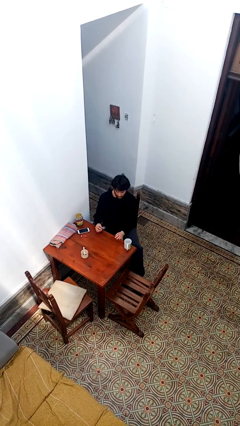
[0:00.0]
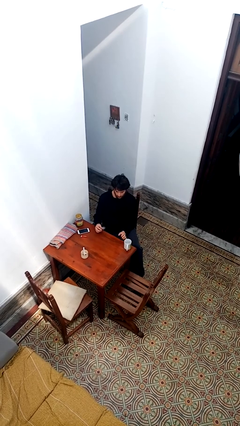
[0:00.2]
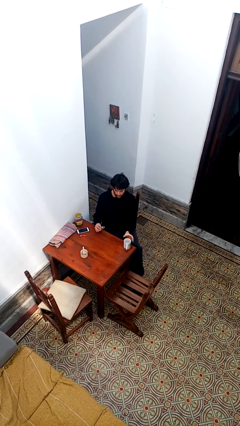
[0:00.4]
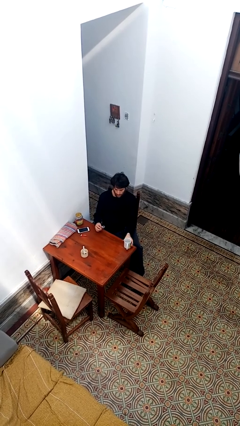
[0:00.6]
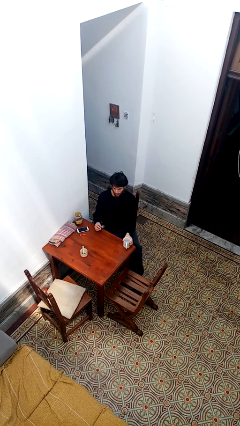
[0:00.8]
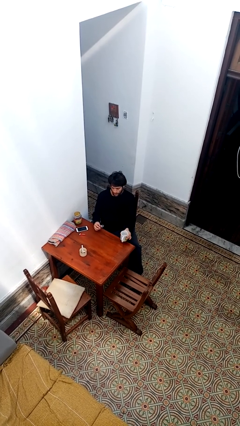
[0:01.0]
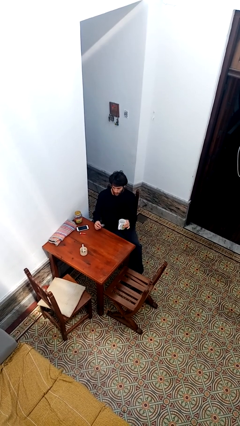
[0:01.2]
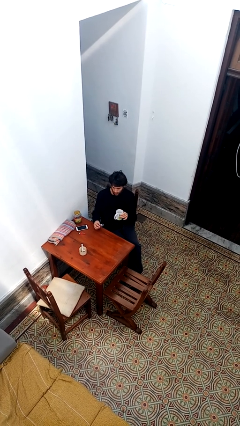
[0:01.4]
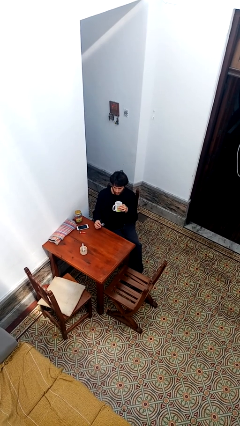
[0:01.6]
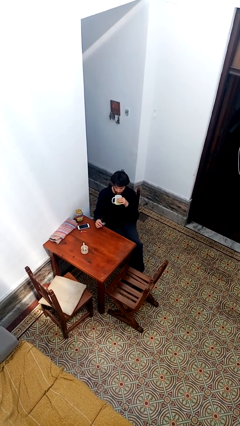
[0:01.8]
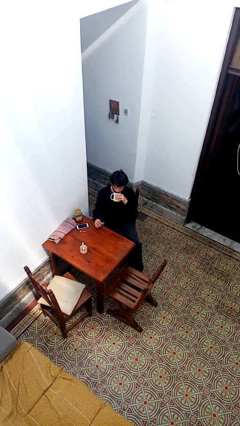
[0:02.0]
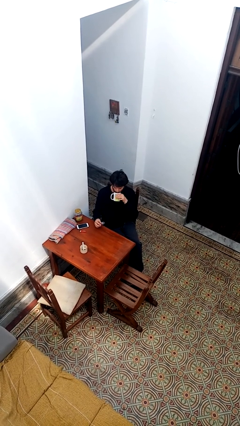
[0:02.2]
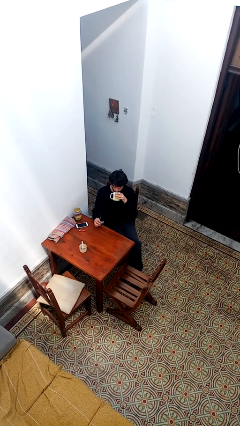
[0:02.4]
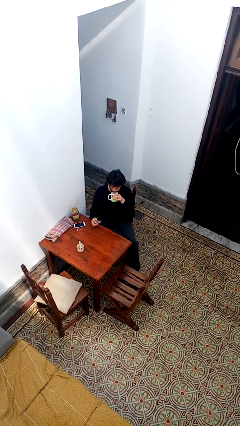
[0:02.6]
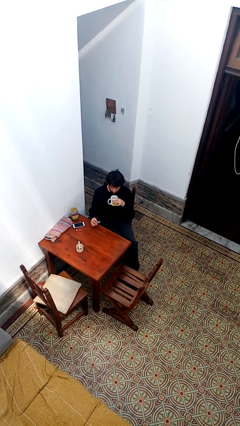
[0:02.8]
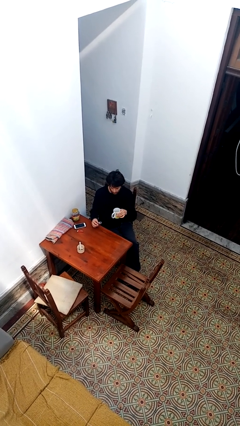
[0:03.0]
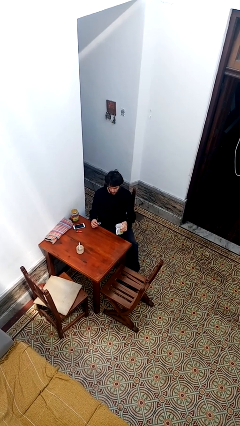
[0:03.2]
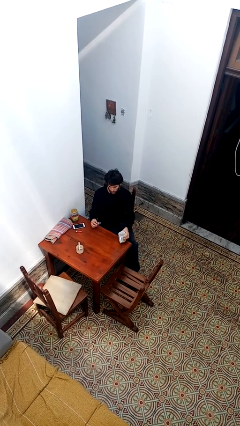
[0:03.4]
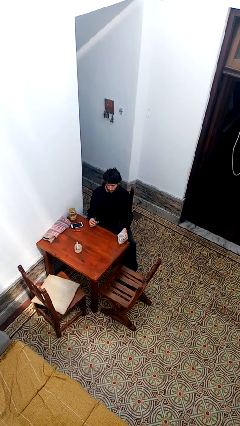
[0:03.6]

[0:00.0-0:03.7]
person drinks from cup

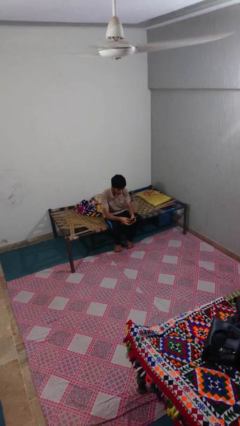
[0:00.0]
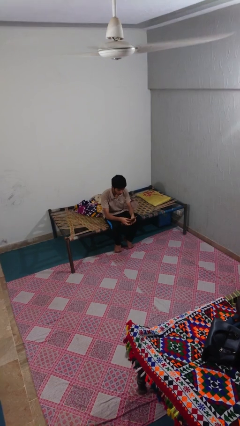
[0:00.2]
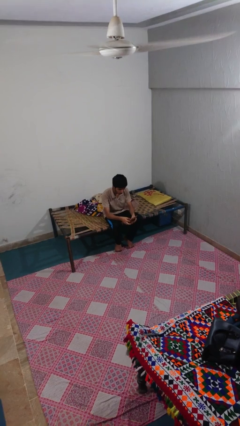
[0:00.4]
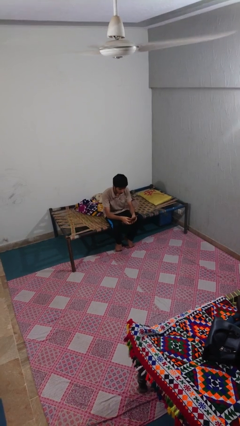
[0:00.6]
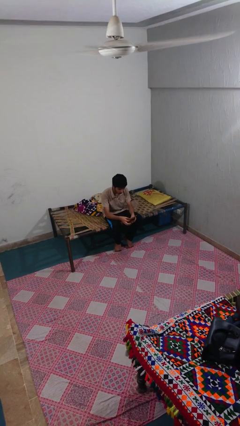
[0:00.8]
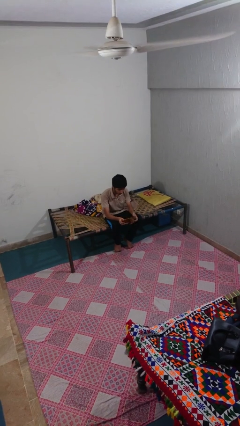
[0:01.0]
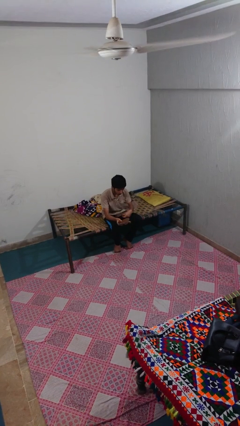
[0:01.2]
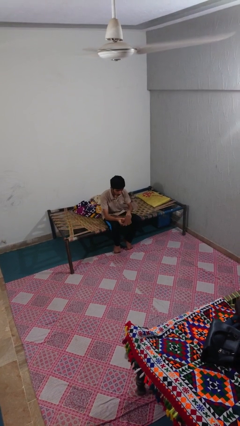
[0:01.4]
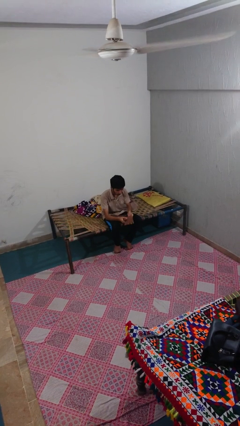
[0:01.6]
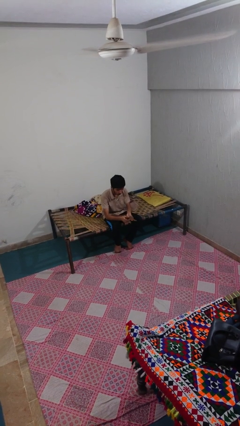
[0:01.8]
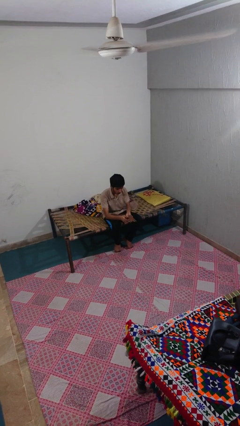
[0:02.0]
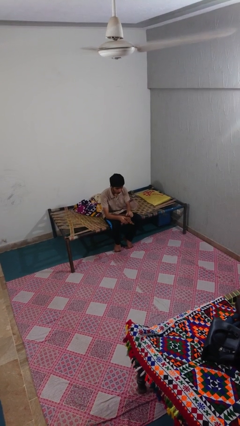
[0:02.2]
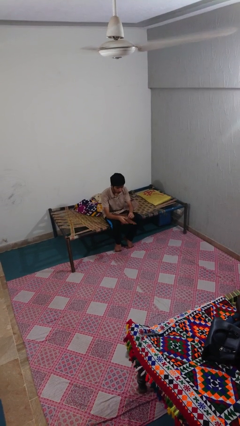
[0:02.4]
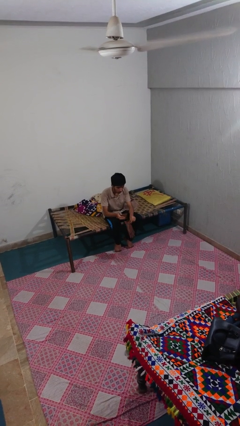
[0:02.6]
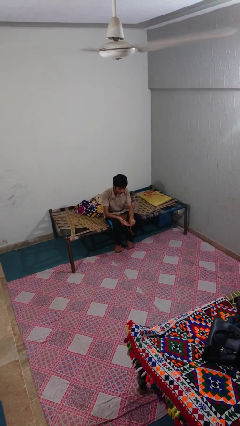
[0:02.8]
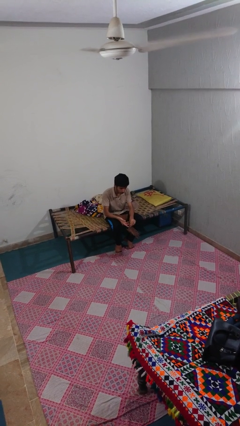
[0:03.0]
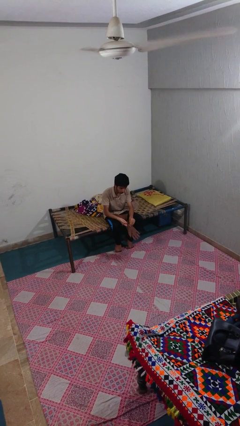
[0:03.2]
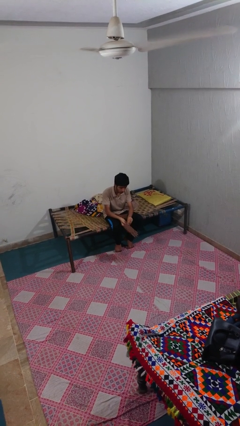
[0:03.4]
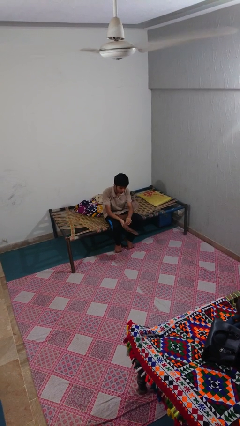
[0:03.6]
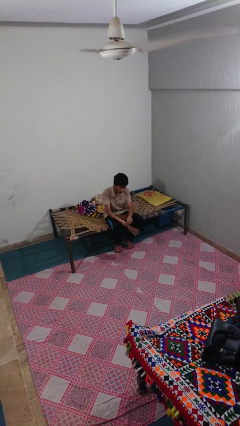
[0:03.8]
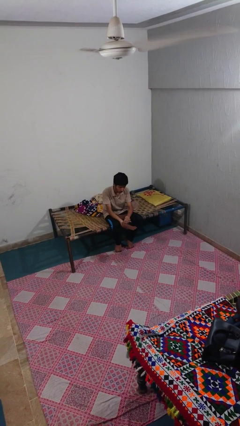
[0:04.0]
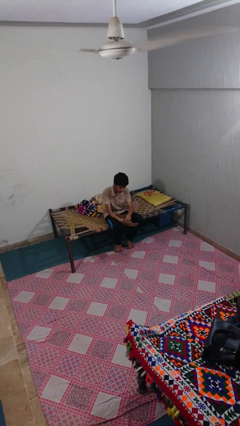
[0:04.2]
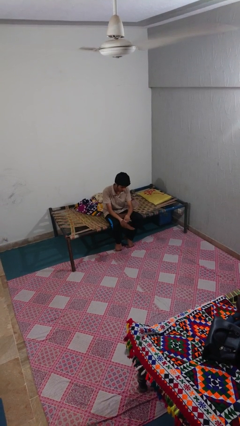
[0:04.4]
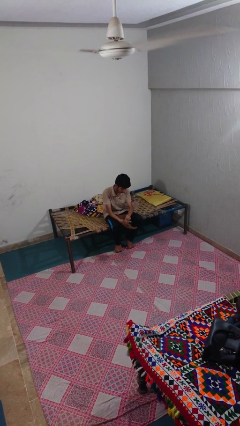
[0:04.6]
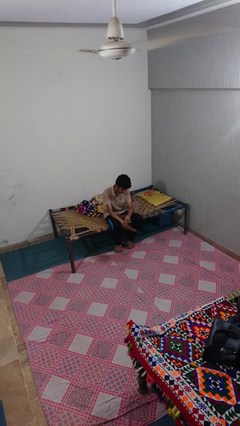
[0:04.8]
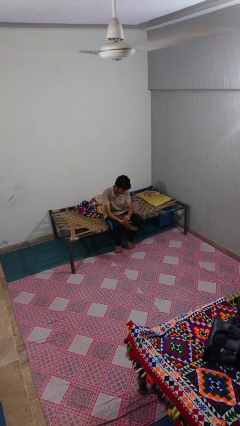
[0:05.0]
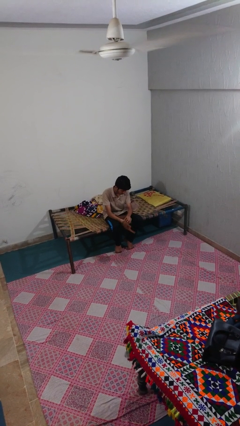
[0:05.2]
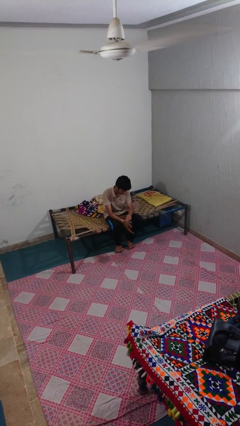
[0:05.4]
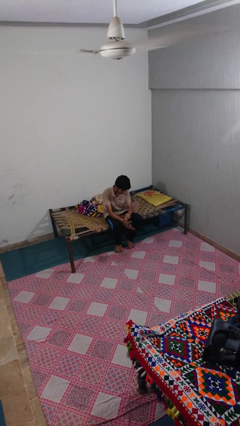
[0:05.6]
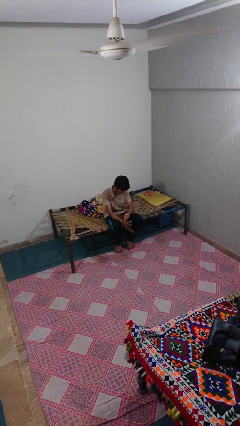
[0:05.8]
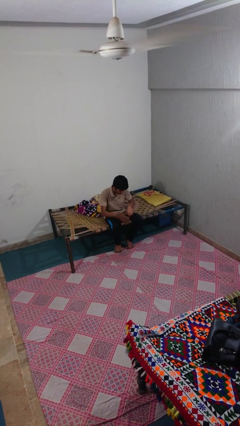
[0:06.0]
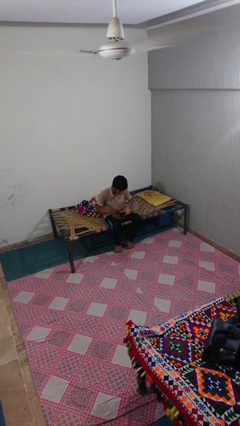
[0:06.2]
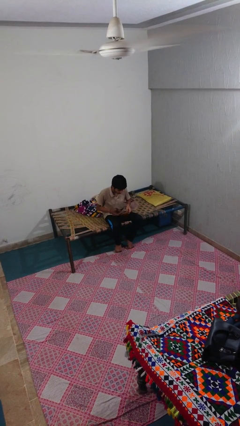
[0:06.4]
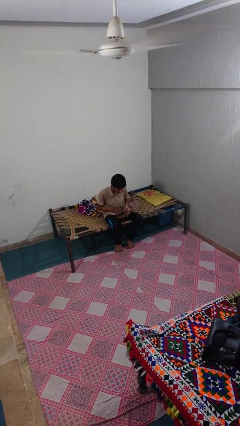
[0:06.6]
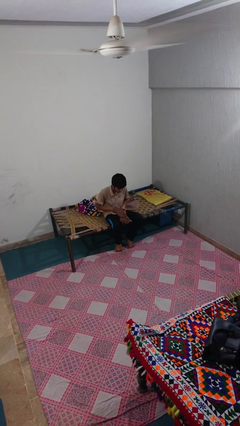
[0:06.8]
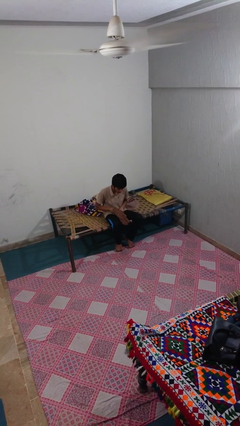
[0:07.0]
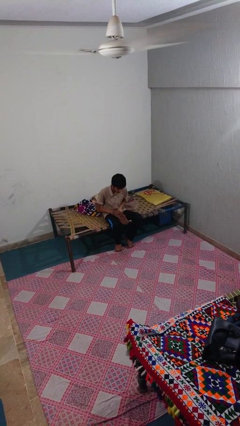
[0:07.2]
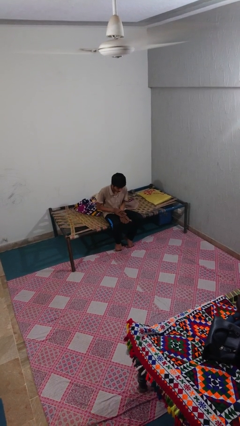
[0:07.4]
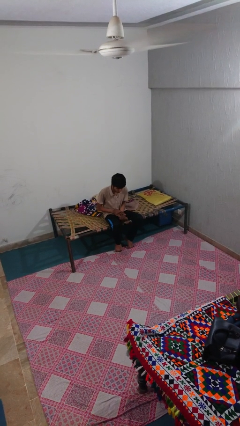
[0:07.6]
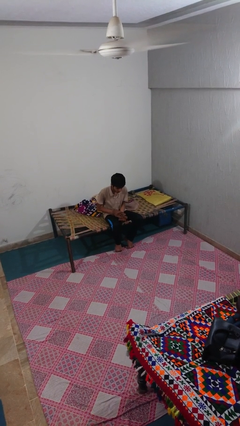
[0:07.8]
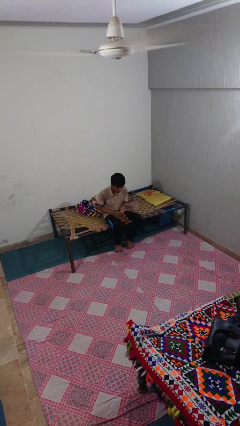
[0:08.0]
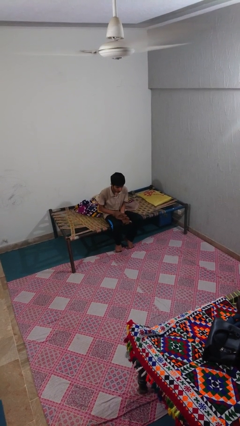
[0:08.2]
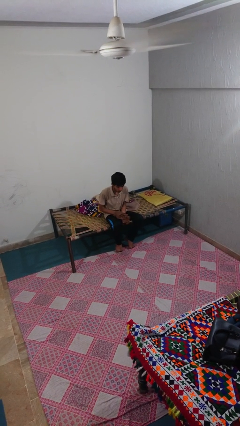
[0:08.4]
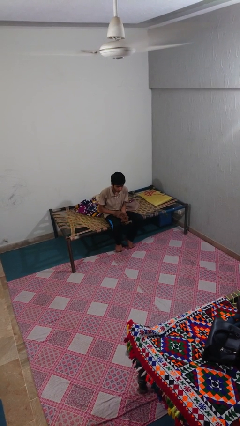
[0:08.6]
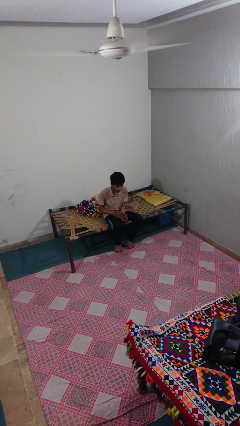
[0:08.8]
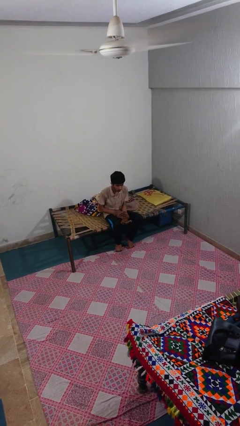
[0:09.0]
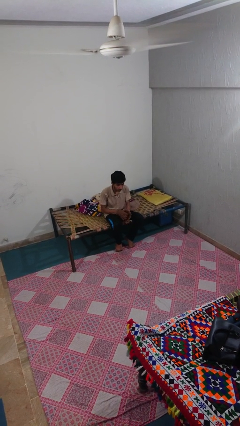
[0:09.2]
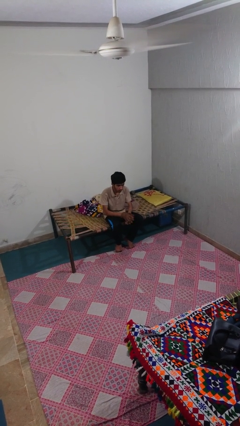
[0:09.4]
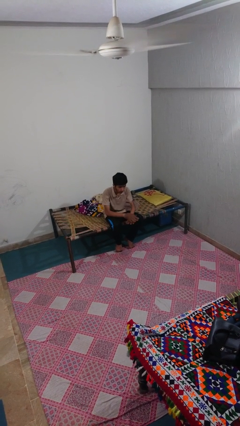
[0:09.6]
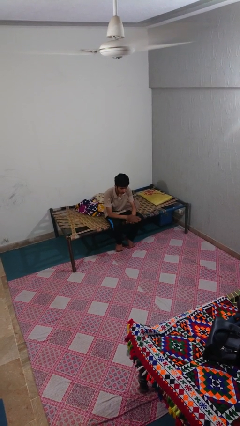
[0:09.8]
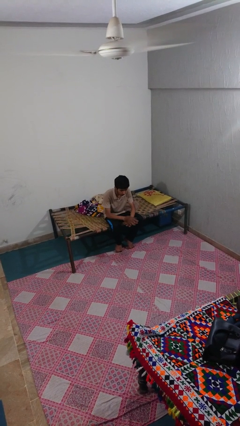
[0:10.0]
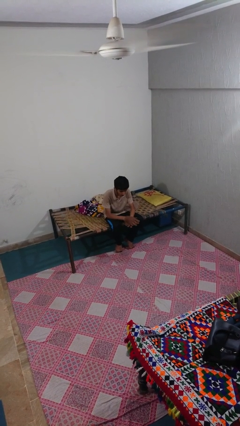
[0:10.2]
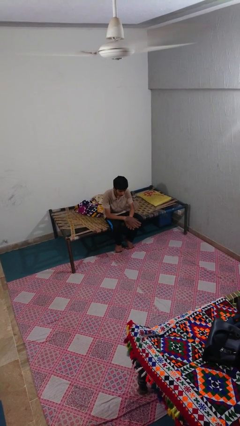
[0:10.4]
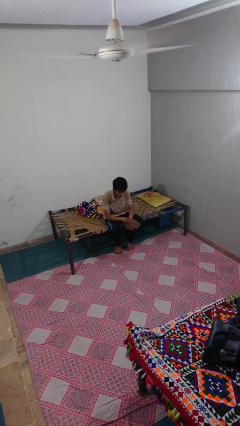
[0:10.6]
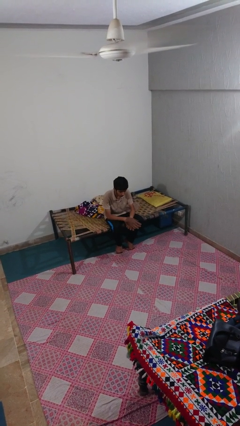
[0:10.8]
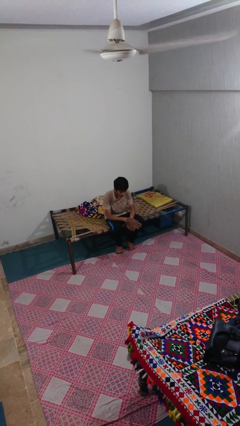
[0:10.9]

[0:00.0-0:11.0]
person puts on gloves

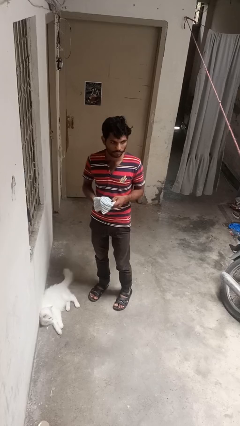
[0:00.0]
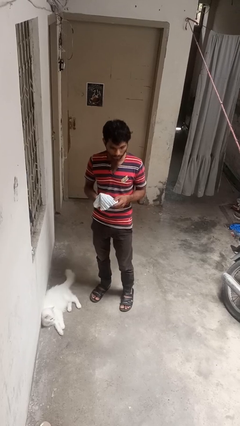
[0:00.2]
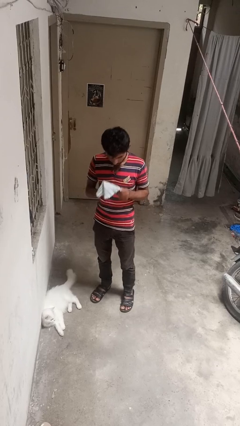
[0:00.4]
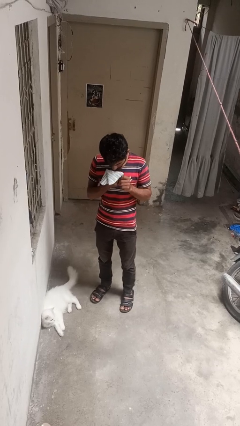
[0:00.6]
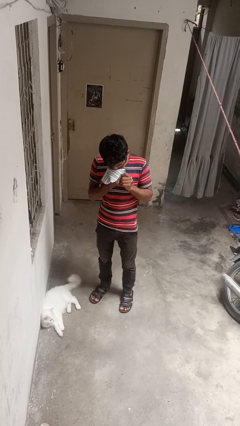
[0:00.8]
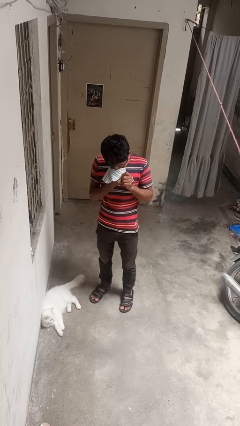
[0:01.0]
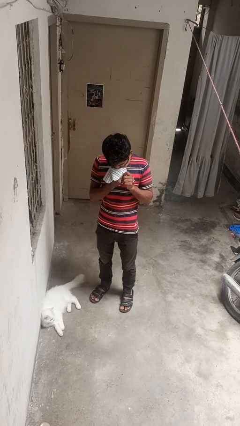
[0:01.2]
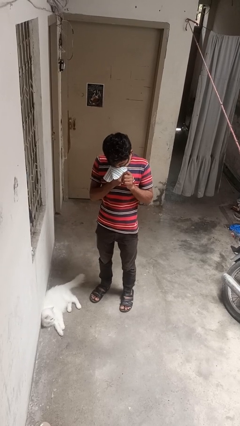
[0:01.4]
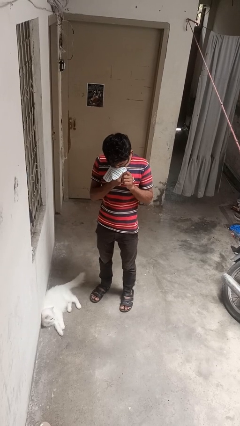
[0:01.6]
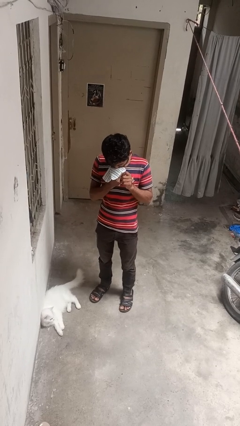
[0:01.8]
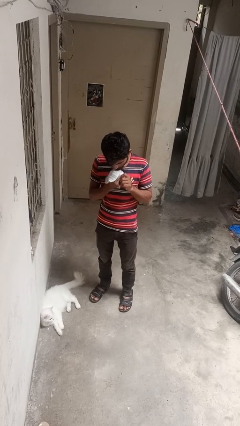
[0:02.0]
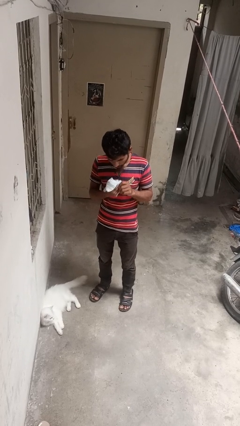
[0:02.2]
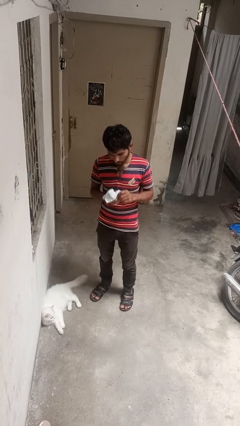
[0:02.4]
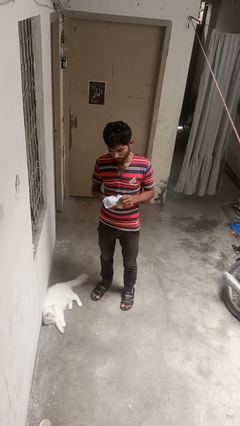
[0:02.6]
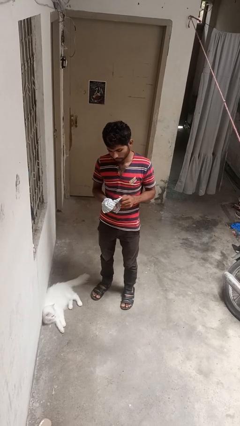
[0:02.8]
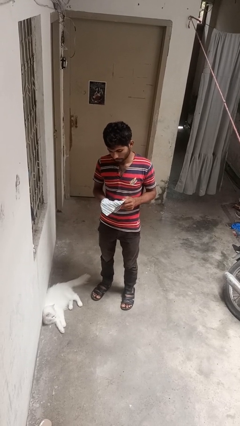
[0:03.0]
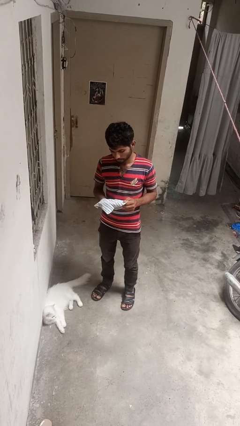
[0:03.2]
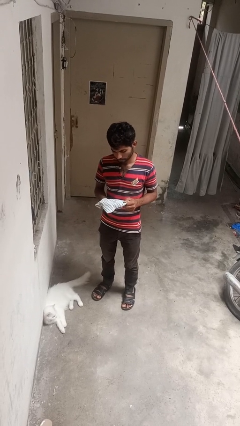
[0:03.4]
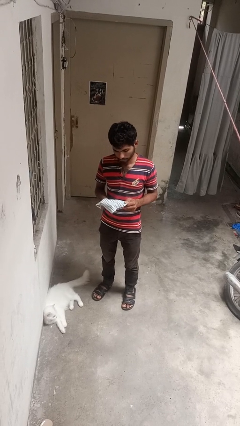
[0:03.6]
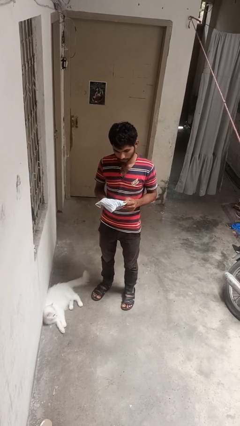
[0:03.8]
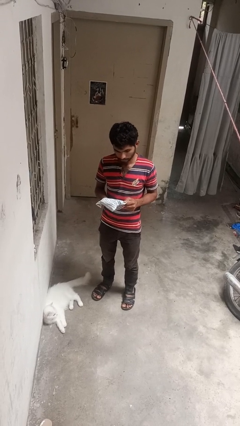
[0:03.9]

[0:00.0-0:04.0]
person blows nose
